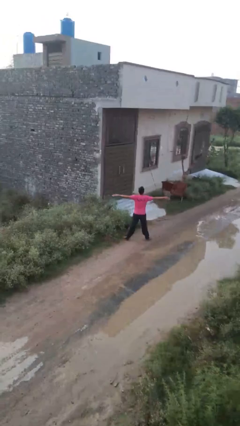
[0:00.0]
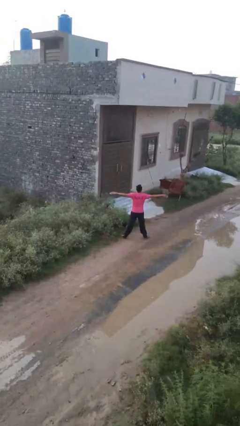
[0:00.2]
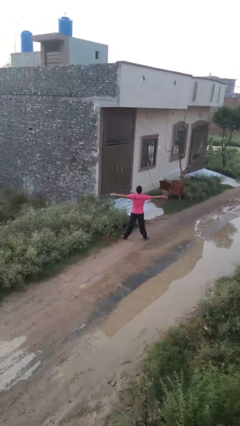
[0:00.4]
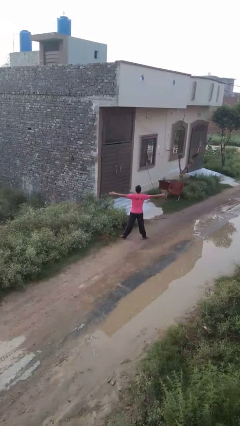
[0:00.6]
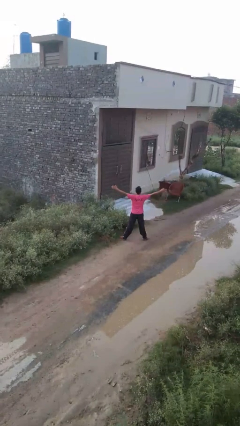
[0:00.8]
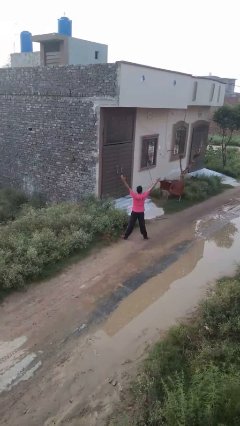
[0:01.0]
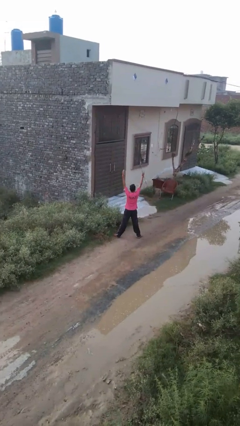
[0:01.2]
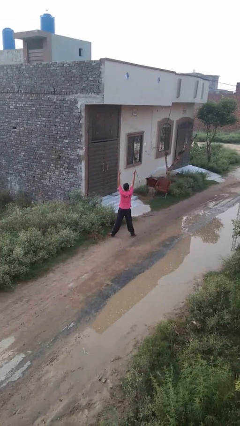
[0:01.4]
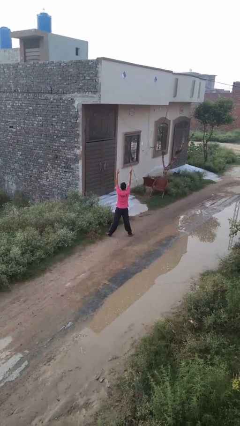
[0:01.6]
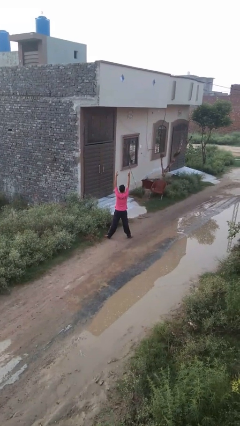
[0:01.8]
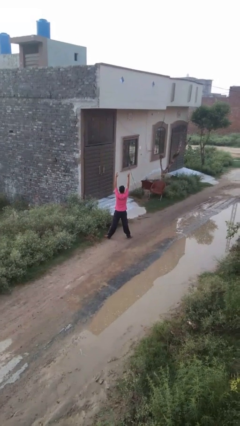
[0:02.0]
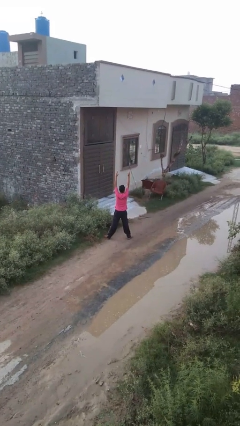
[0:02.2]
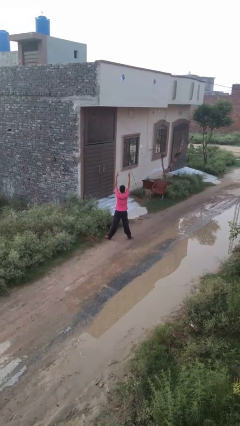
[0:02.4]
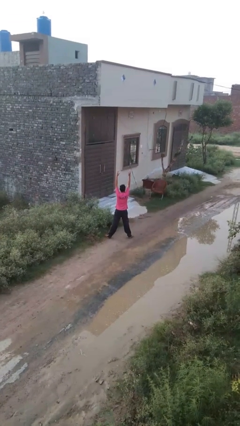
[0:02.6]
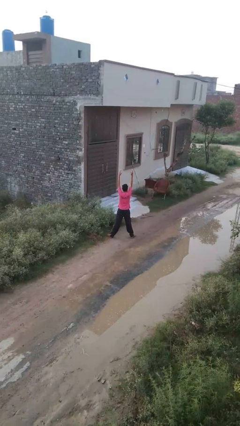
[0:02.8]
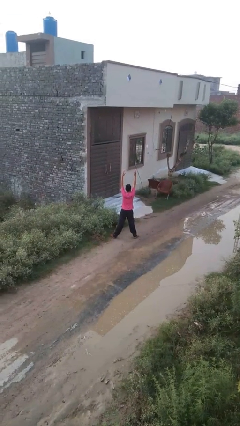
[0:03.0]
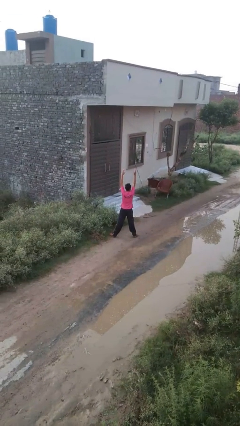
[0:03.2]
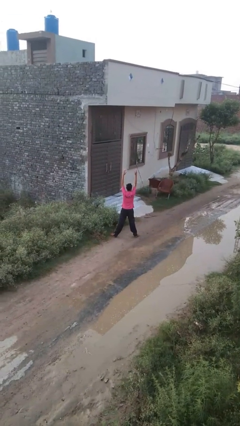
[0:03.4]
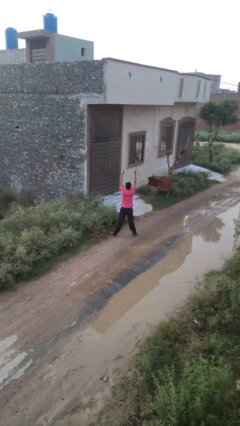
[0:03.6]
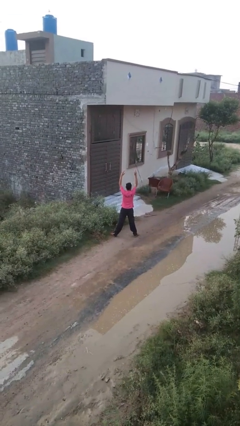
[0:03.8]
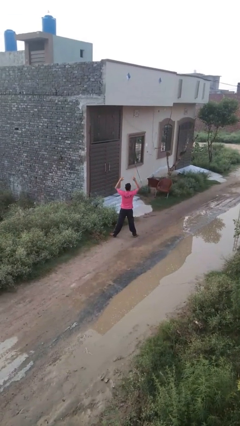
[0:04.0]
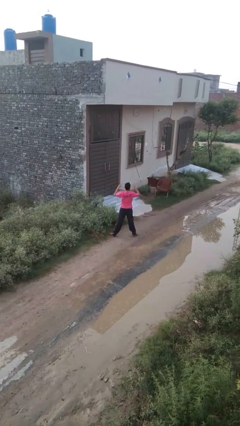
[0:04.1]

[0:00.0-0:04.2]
person stretches arms over head

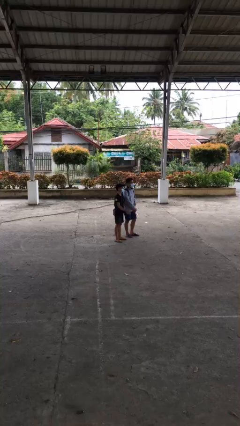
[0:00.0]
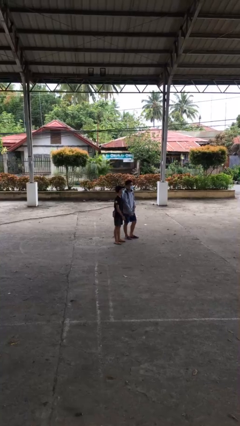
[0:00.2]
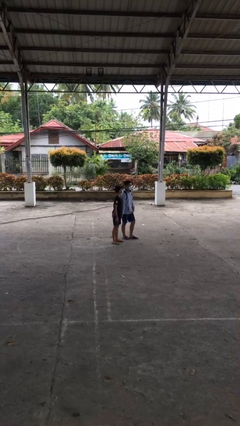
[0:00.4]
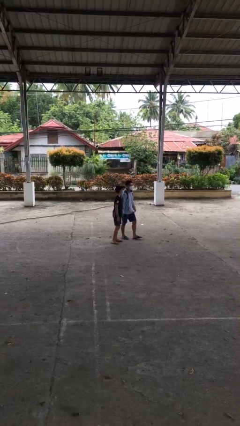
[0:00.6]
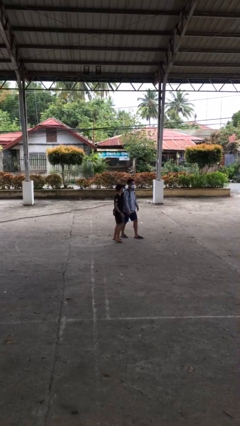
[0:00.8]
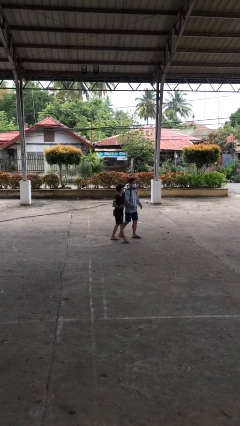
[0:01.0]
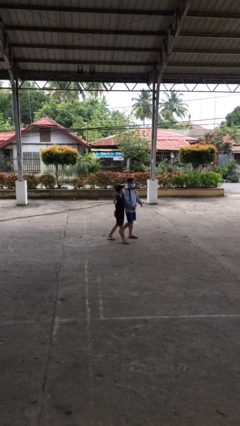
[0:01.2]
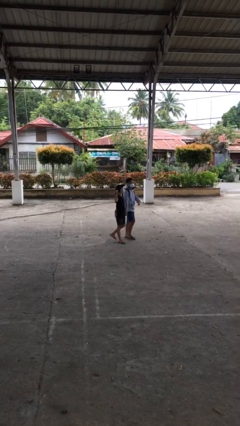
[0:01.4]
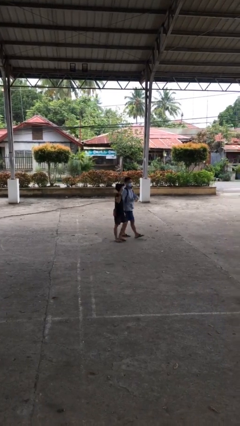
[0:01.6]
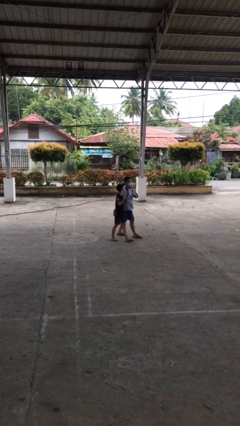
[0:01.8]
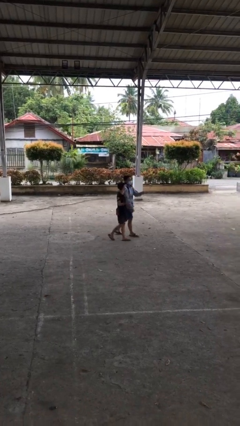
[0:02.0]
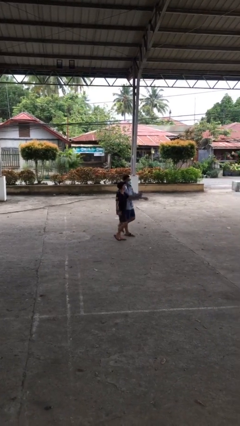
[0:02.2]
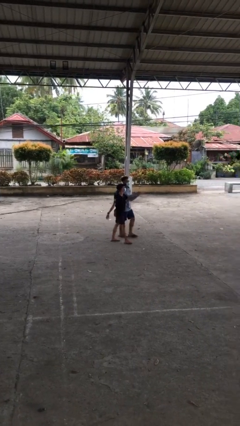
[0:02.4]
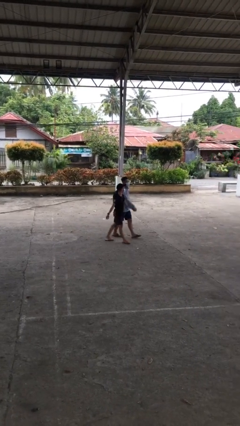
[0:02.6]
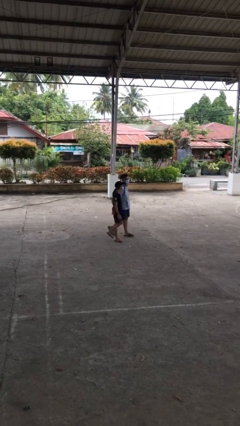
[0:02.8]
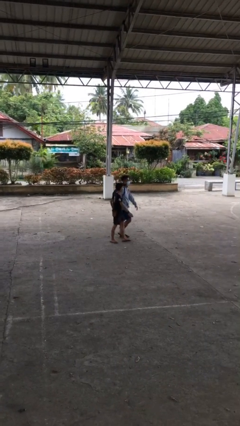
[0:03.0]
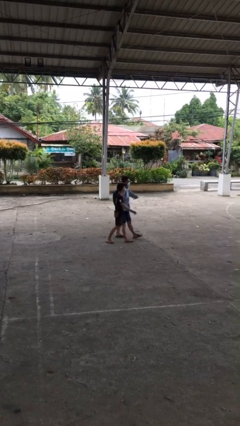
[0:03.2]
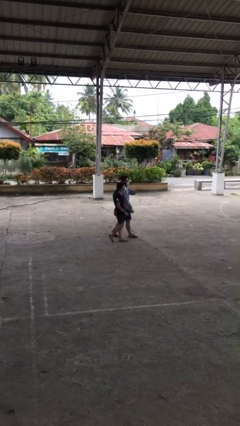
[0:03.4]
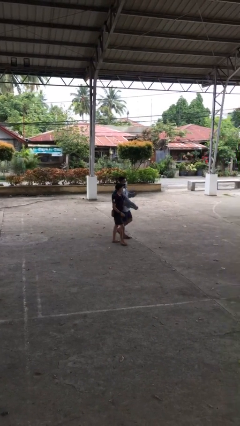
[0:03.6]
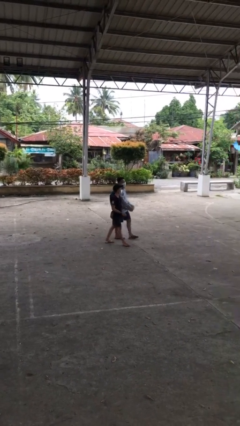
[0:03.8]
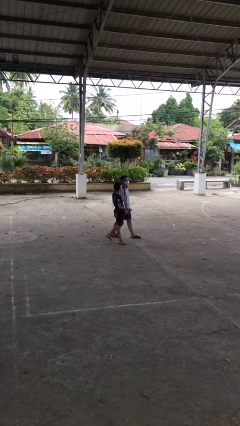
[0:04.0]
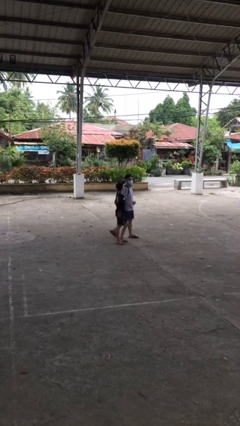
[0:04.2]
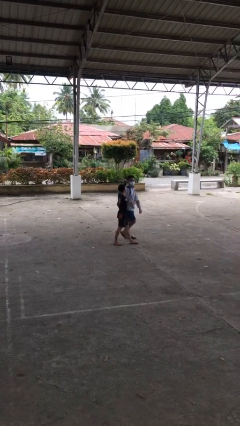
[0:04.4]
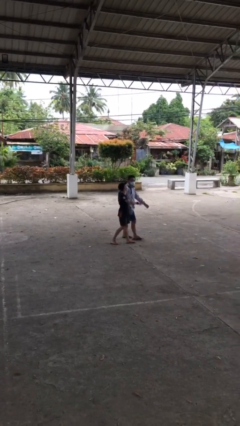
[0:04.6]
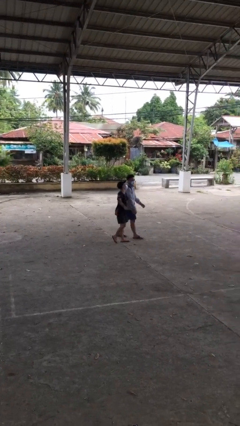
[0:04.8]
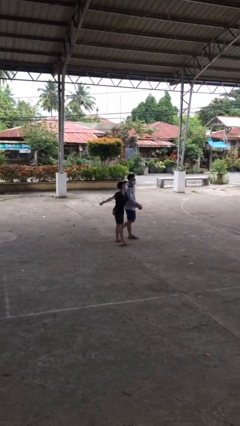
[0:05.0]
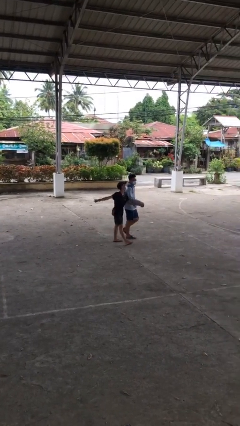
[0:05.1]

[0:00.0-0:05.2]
person holds hand

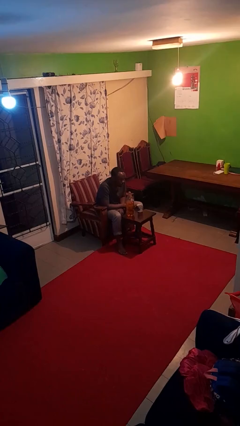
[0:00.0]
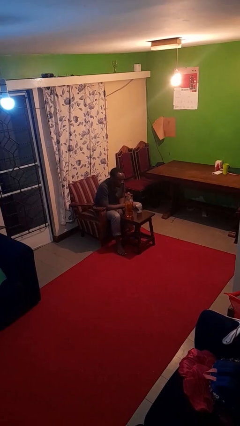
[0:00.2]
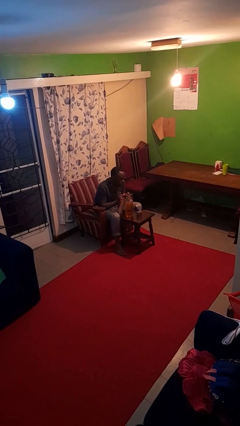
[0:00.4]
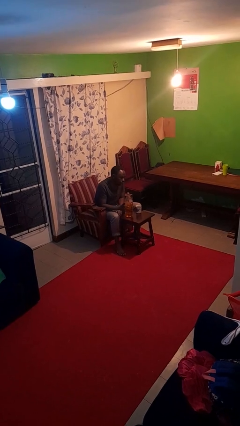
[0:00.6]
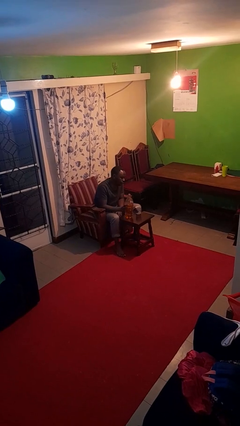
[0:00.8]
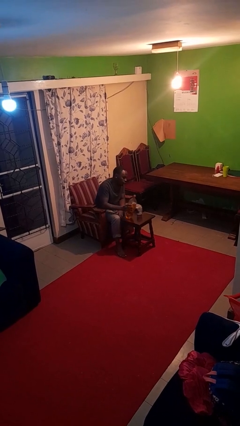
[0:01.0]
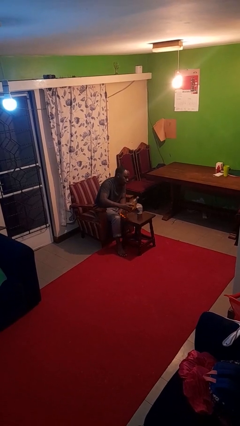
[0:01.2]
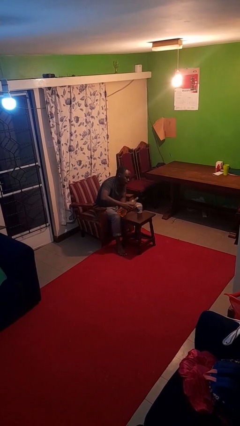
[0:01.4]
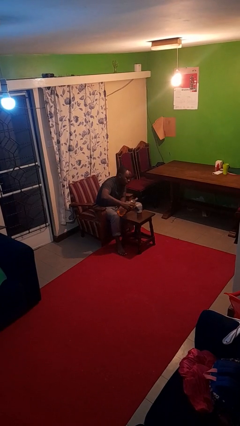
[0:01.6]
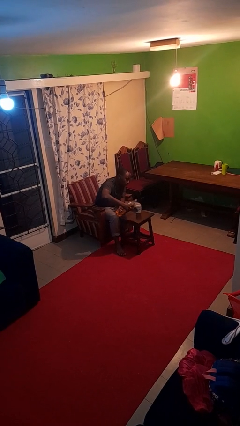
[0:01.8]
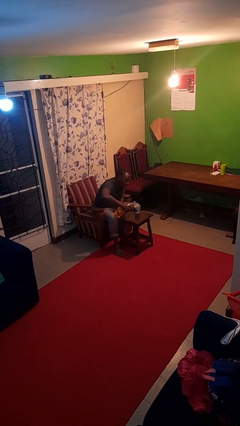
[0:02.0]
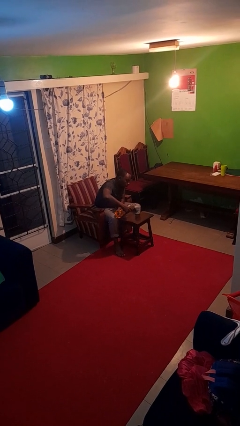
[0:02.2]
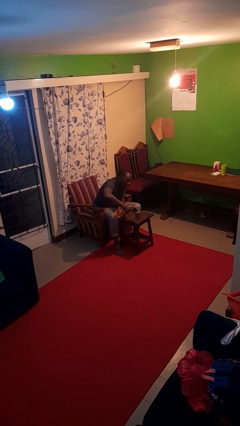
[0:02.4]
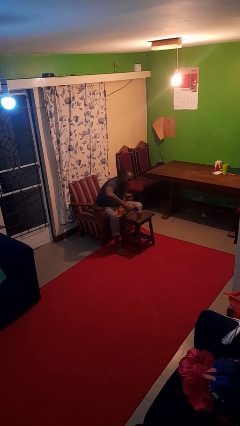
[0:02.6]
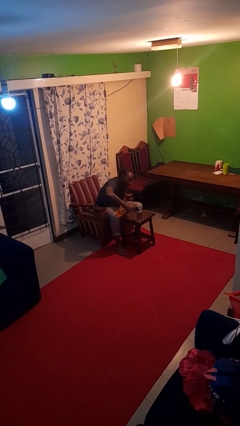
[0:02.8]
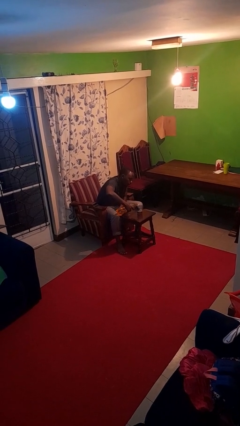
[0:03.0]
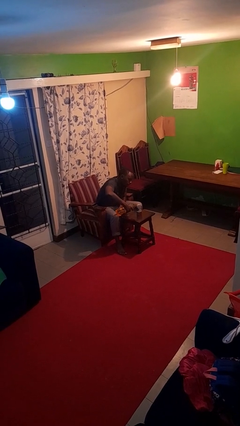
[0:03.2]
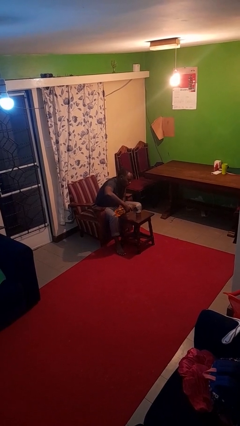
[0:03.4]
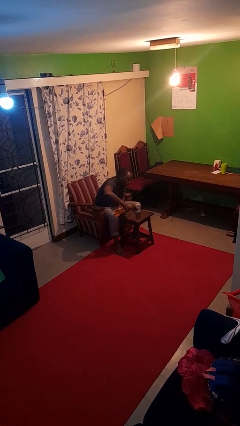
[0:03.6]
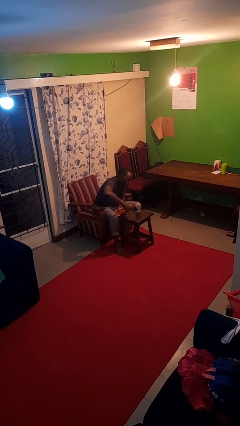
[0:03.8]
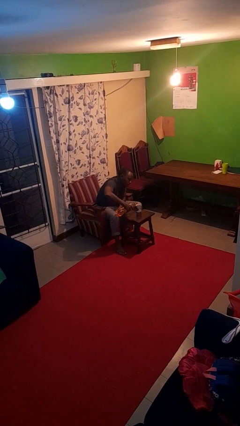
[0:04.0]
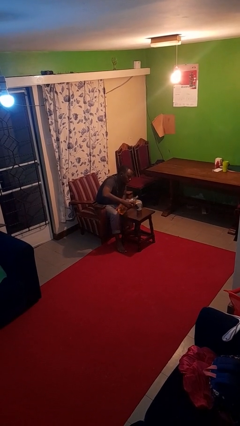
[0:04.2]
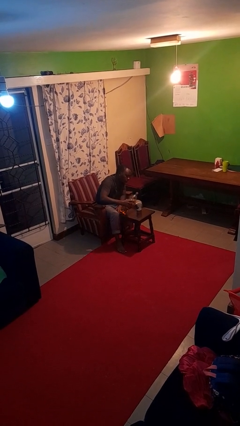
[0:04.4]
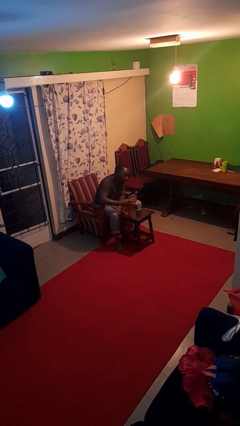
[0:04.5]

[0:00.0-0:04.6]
person pours liquid into cup

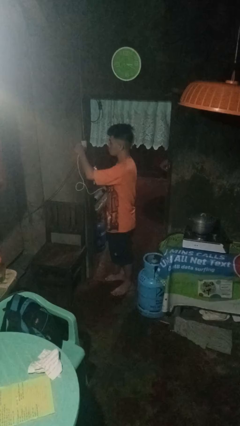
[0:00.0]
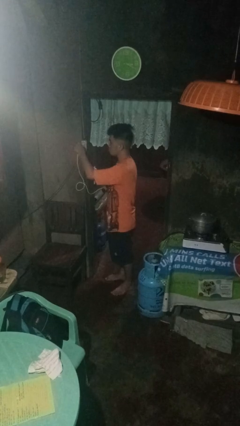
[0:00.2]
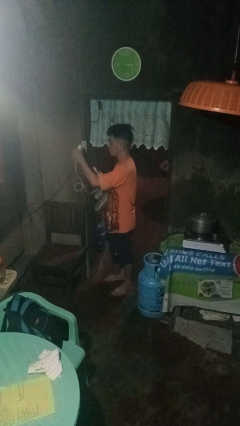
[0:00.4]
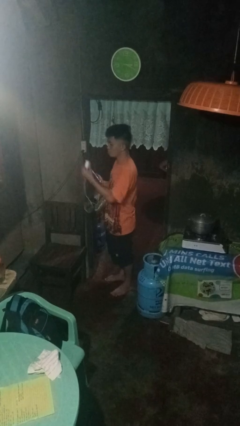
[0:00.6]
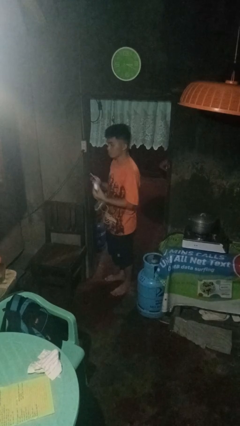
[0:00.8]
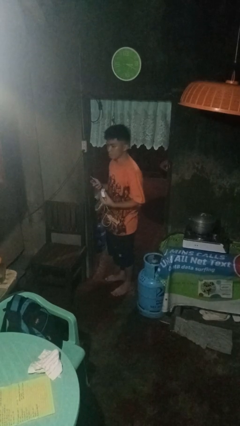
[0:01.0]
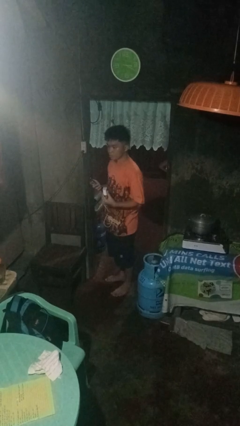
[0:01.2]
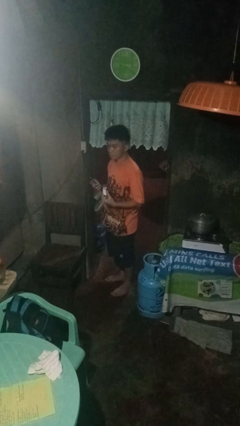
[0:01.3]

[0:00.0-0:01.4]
person unplugs from electrical socket

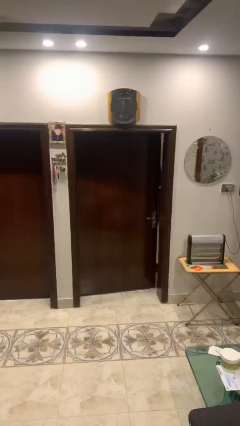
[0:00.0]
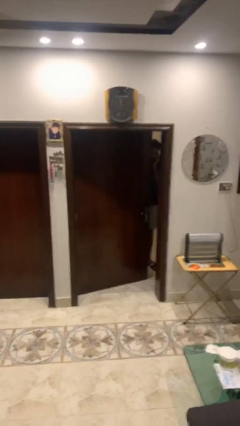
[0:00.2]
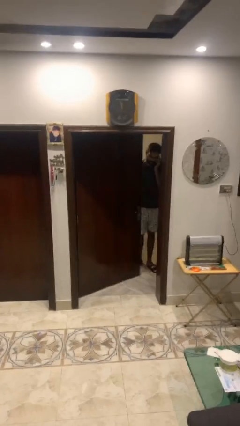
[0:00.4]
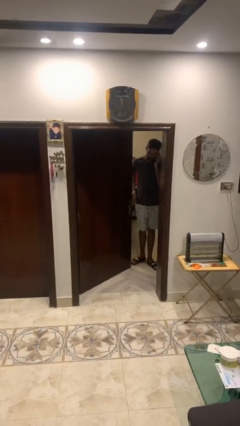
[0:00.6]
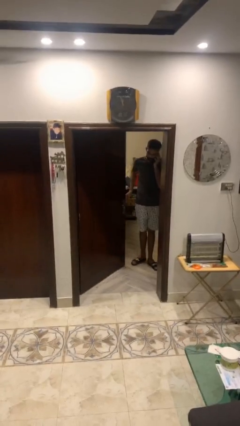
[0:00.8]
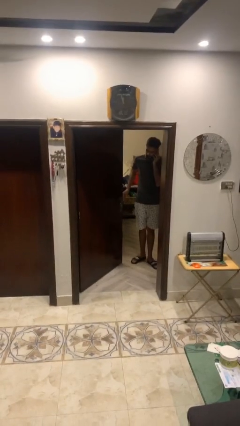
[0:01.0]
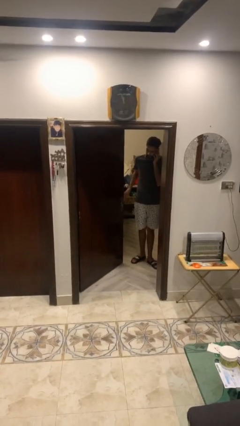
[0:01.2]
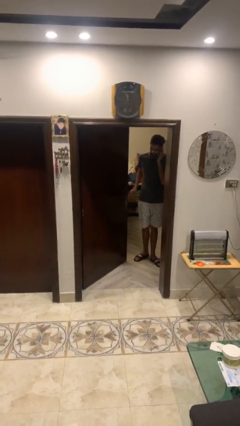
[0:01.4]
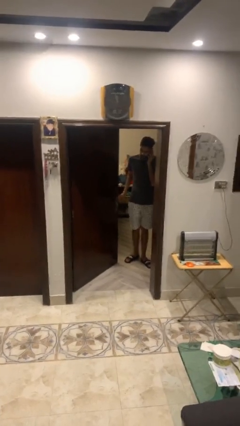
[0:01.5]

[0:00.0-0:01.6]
person opens facility door

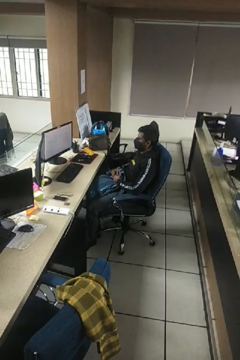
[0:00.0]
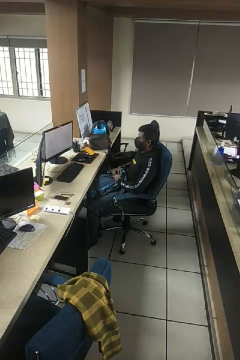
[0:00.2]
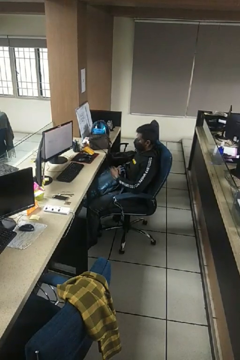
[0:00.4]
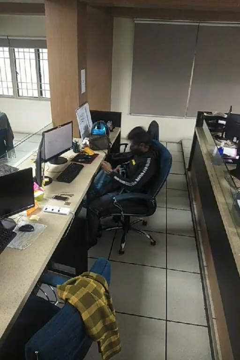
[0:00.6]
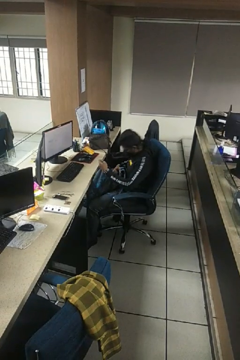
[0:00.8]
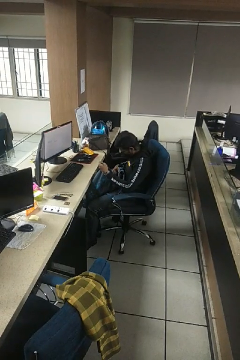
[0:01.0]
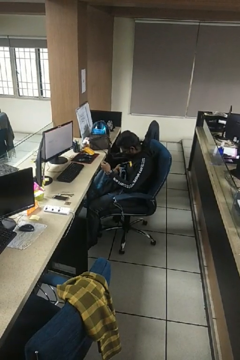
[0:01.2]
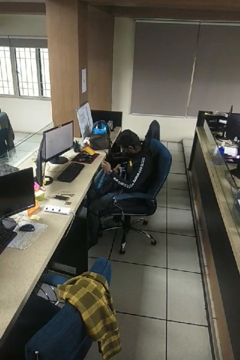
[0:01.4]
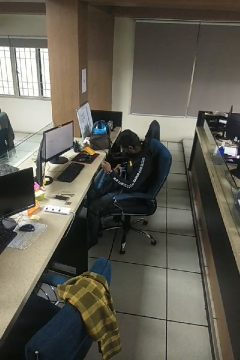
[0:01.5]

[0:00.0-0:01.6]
person searches in backpack
